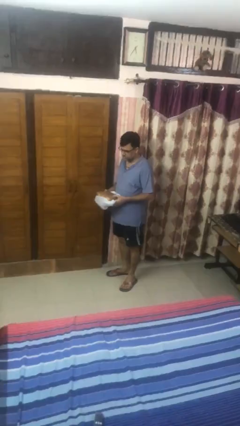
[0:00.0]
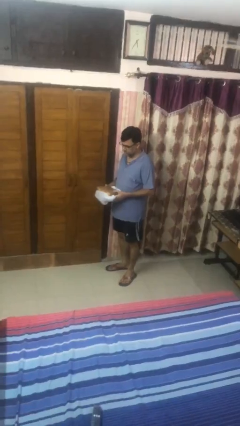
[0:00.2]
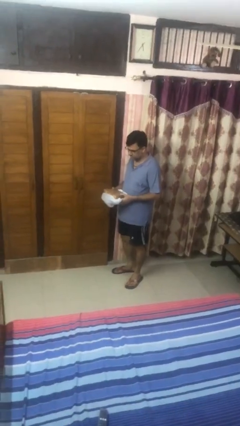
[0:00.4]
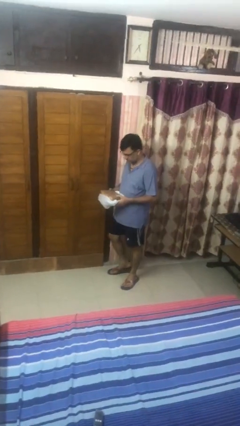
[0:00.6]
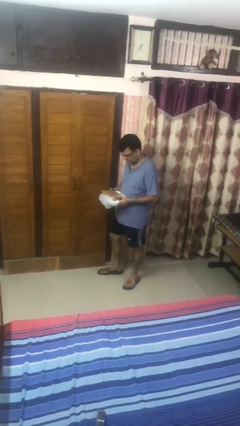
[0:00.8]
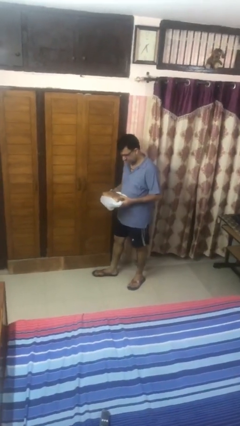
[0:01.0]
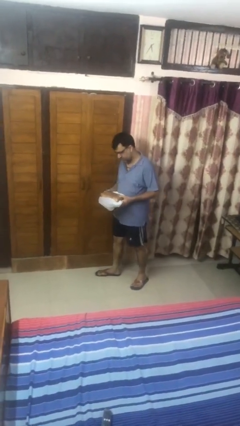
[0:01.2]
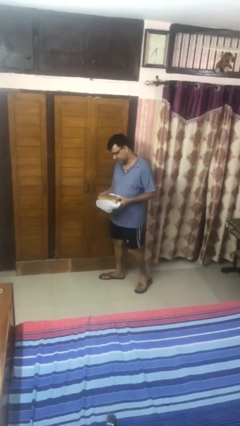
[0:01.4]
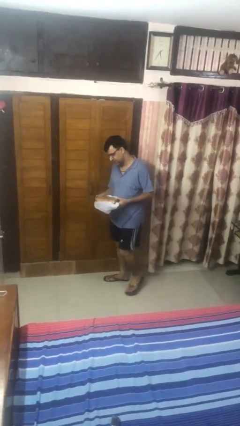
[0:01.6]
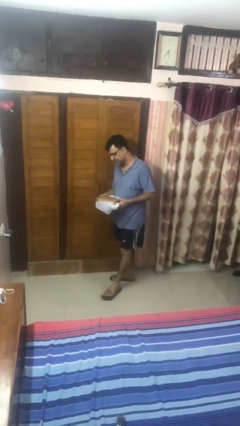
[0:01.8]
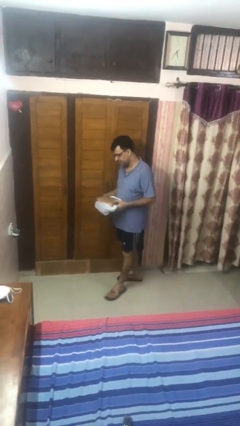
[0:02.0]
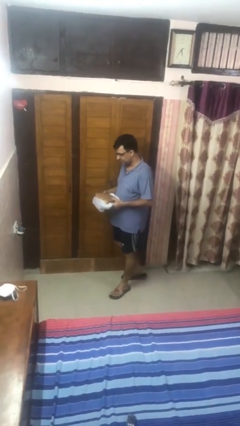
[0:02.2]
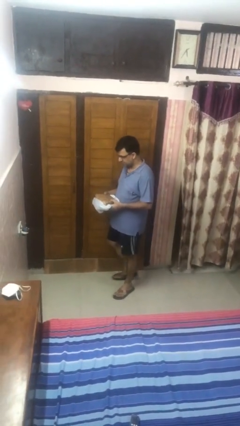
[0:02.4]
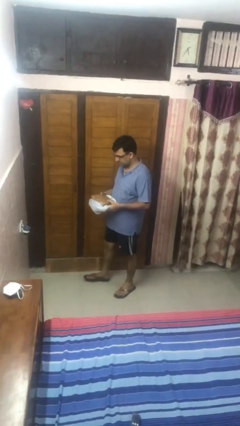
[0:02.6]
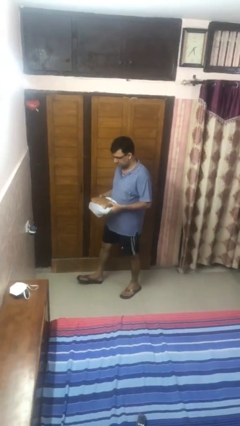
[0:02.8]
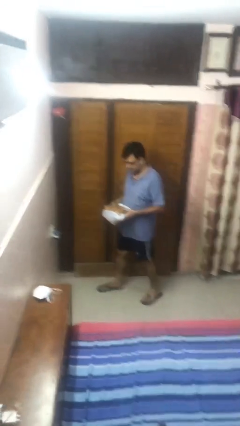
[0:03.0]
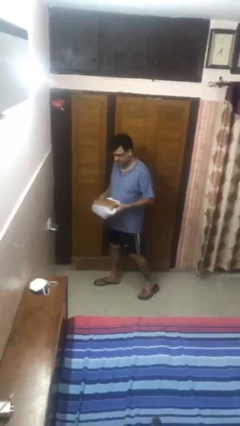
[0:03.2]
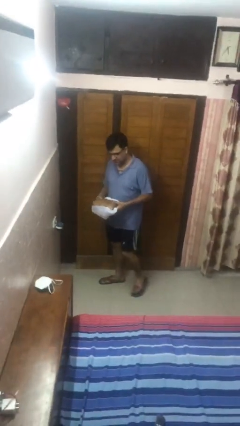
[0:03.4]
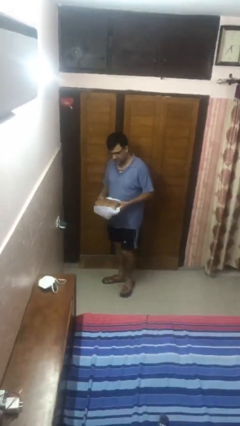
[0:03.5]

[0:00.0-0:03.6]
person carries groceries

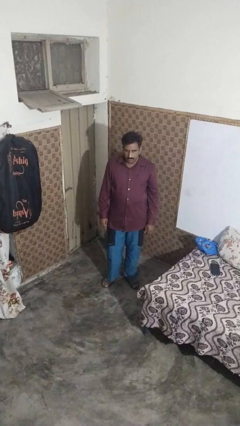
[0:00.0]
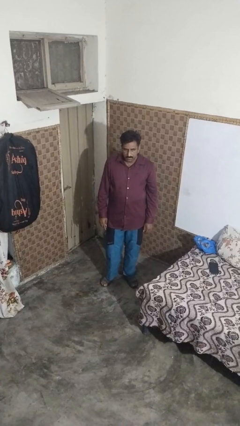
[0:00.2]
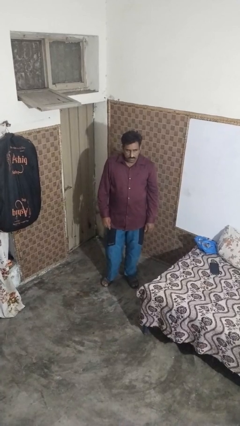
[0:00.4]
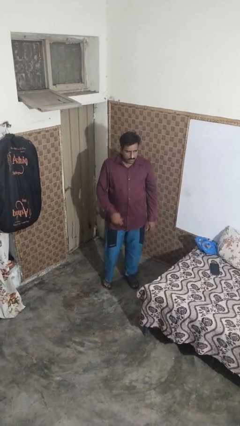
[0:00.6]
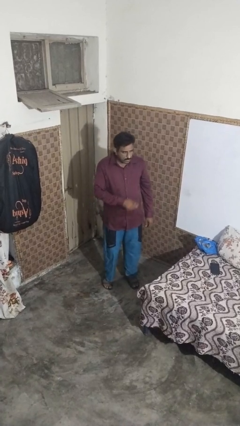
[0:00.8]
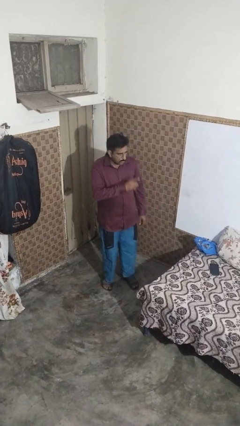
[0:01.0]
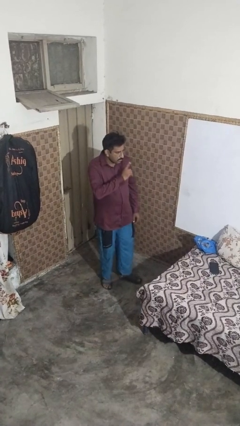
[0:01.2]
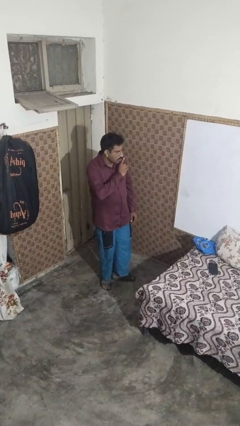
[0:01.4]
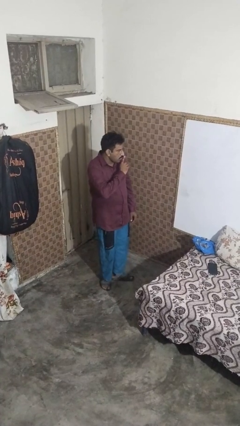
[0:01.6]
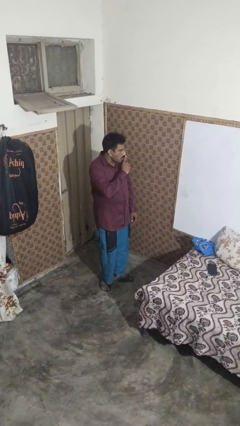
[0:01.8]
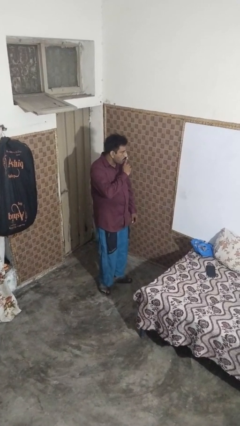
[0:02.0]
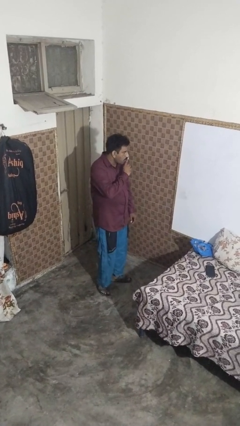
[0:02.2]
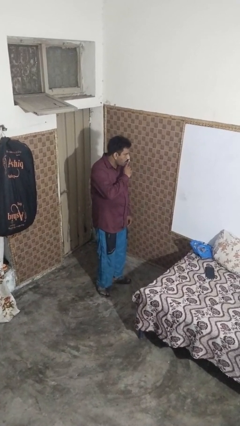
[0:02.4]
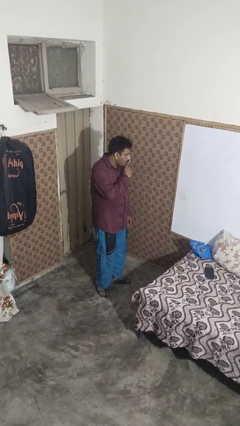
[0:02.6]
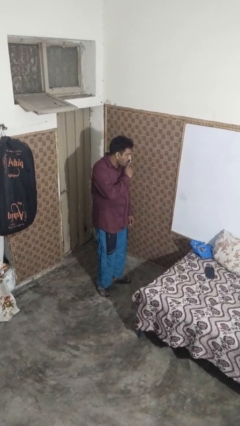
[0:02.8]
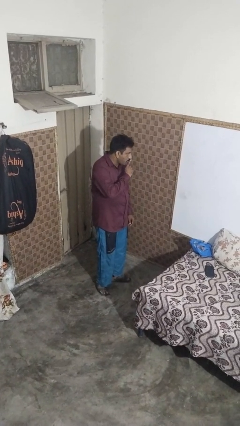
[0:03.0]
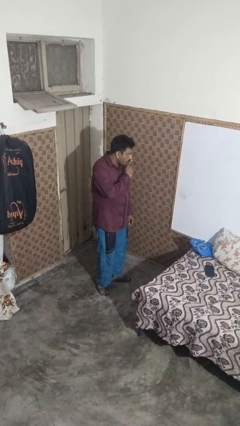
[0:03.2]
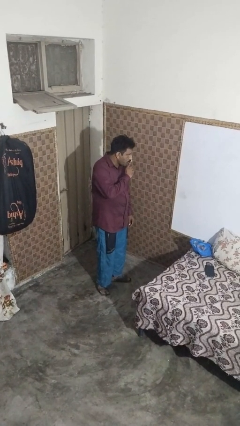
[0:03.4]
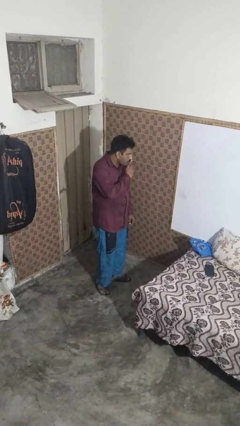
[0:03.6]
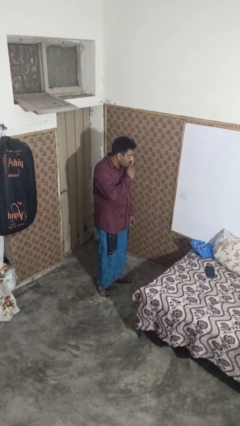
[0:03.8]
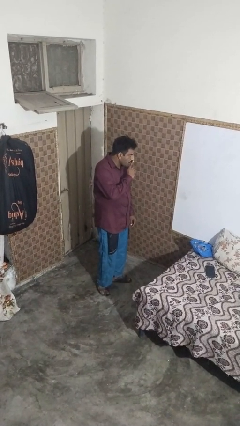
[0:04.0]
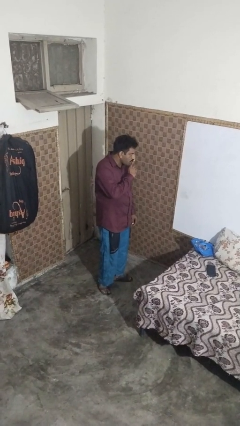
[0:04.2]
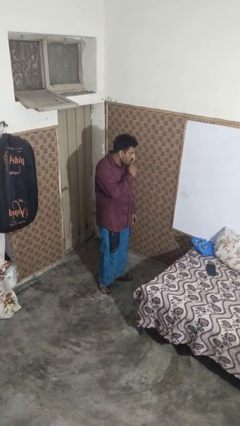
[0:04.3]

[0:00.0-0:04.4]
person gestures be quiet

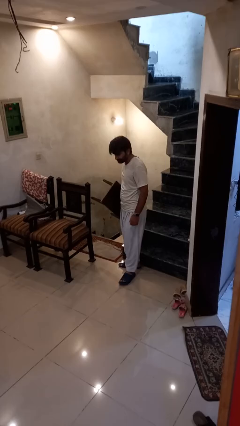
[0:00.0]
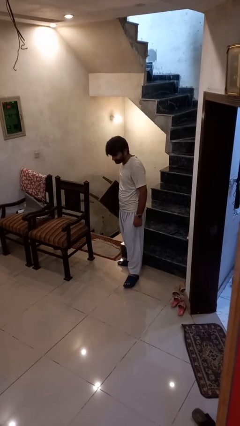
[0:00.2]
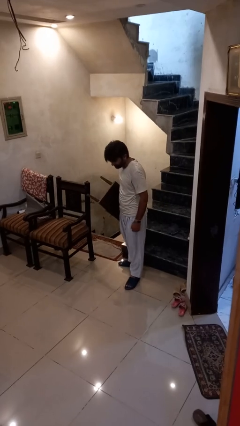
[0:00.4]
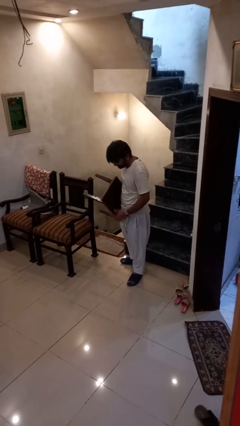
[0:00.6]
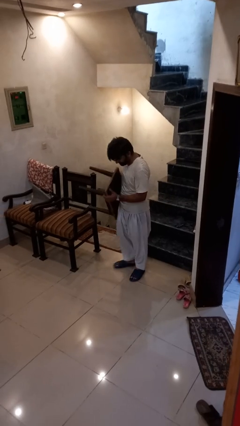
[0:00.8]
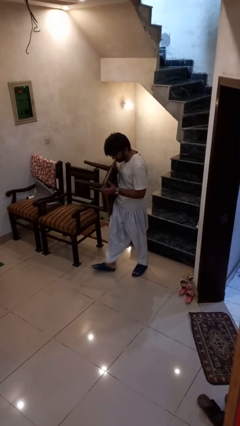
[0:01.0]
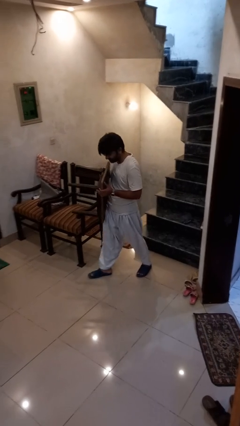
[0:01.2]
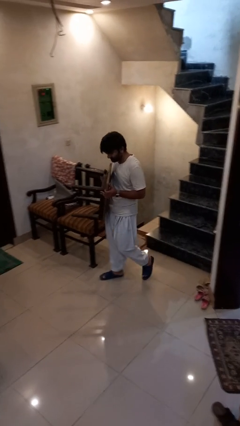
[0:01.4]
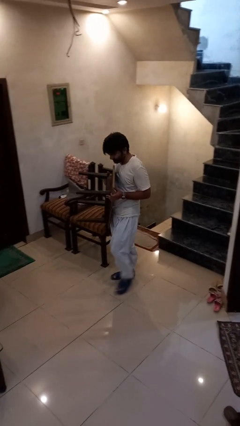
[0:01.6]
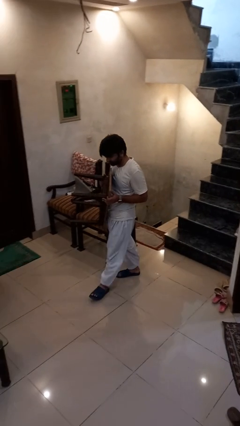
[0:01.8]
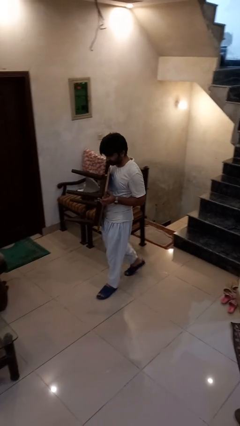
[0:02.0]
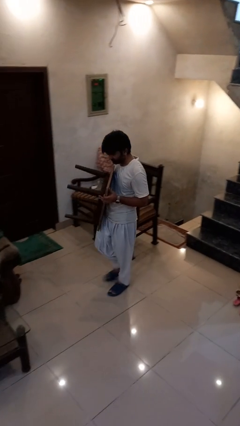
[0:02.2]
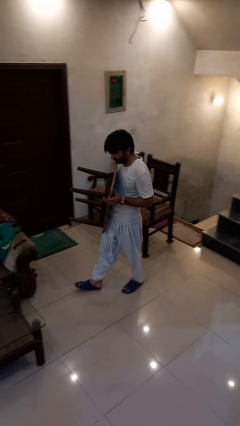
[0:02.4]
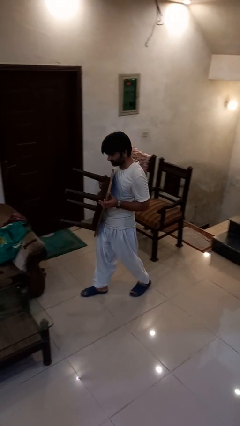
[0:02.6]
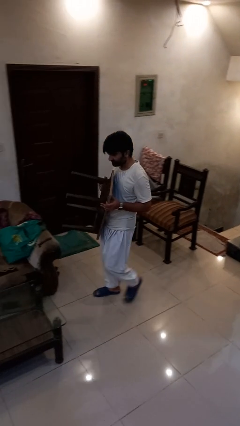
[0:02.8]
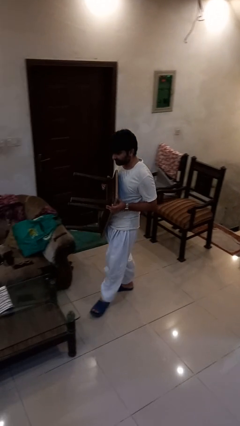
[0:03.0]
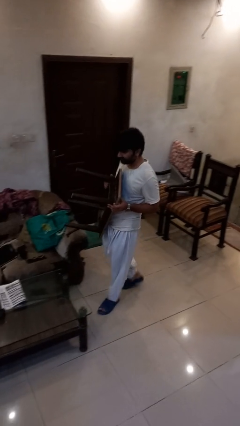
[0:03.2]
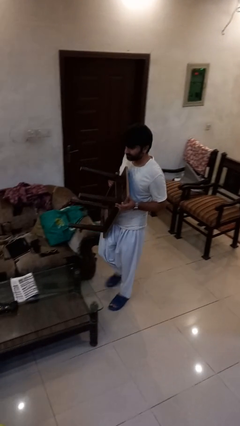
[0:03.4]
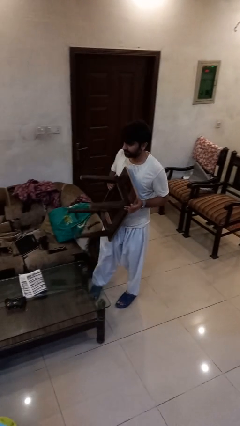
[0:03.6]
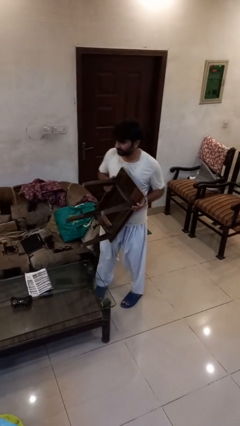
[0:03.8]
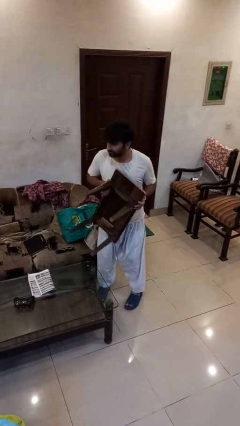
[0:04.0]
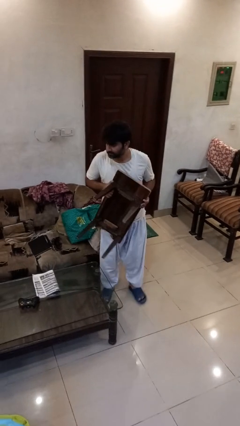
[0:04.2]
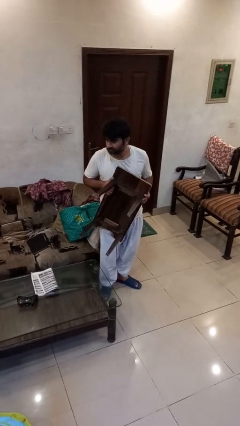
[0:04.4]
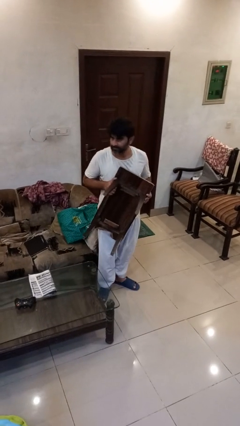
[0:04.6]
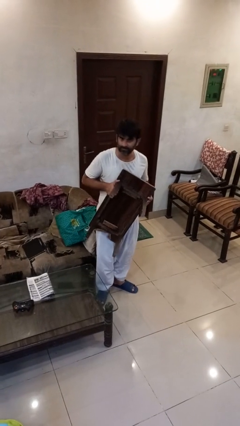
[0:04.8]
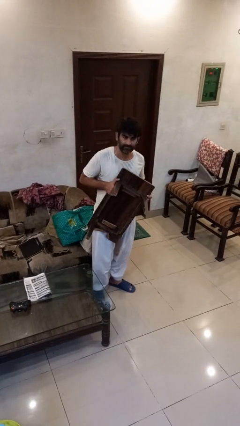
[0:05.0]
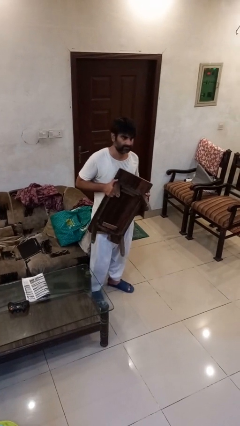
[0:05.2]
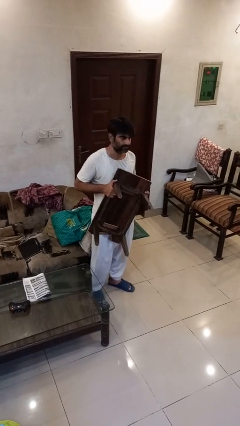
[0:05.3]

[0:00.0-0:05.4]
person carries furniture

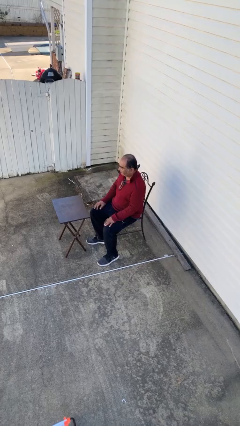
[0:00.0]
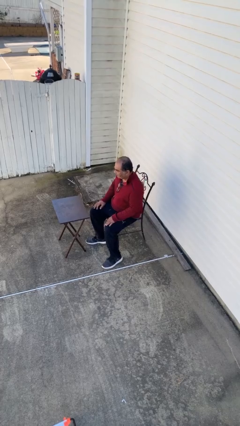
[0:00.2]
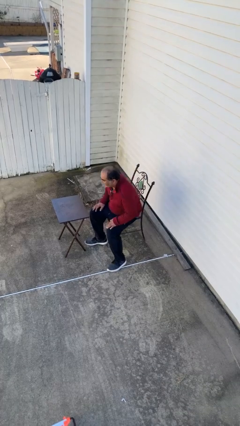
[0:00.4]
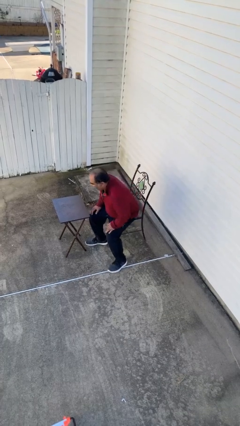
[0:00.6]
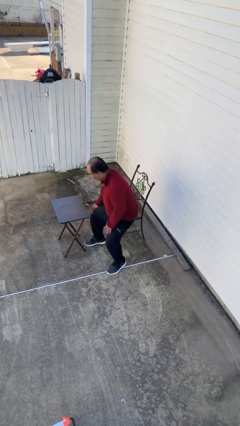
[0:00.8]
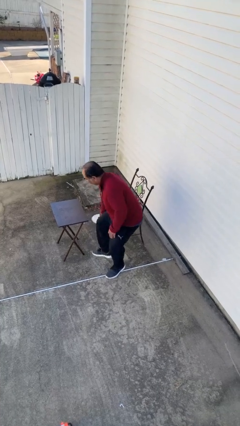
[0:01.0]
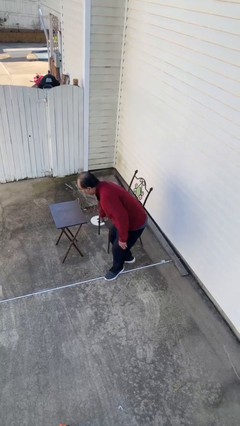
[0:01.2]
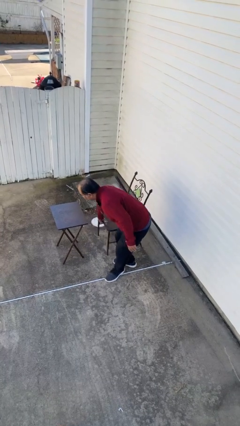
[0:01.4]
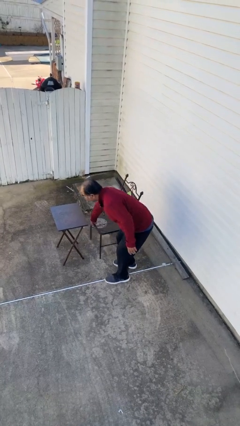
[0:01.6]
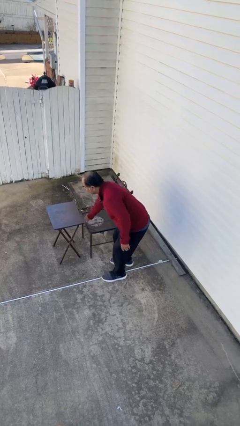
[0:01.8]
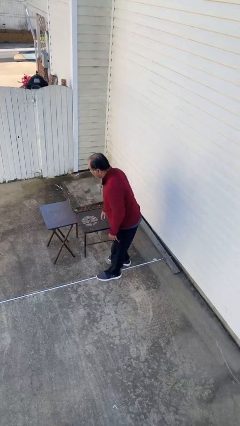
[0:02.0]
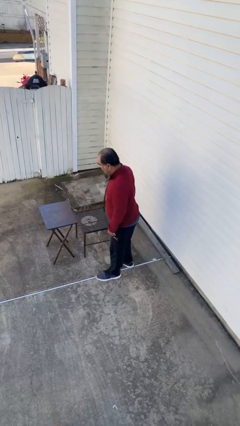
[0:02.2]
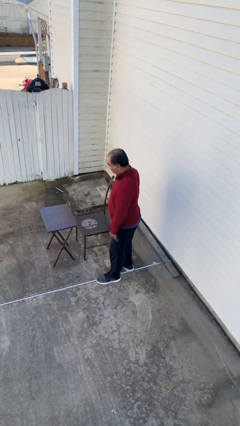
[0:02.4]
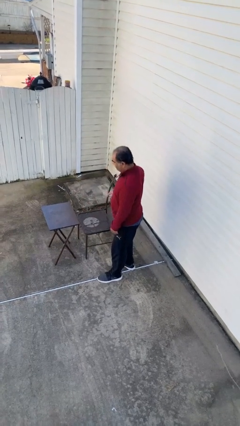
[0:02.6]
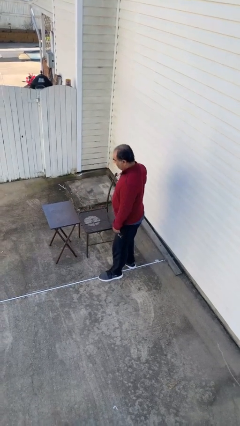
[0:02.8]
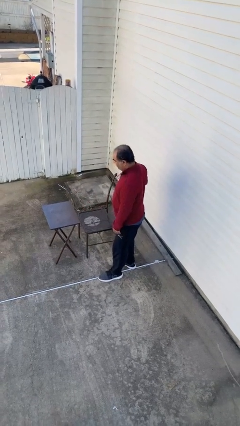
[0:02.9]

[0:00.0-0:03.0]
person stands up

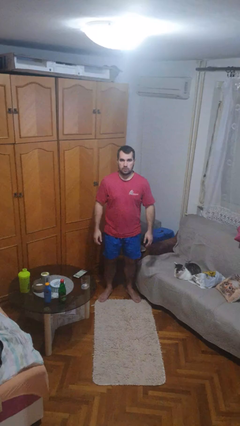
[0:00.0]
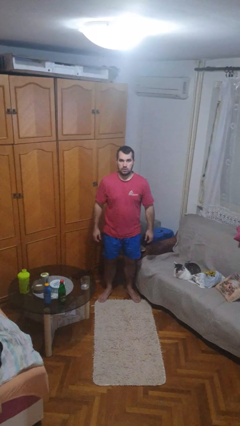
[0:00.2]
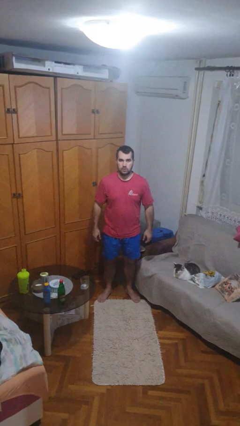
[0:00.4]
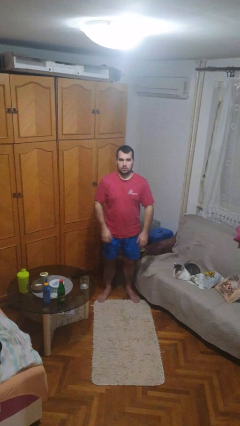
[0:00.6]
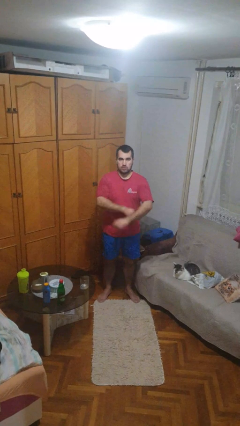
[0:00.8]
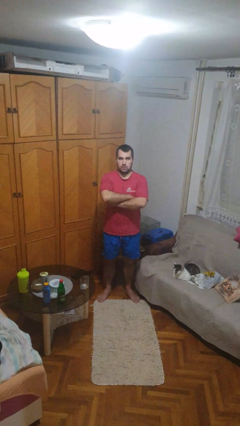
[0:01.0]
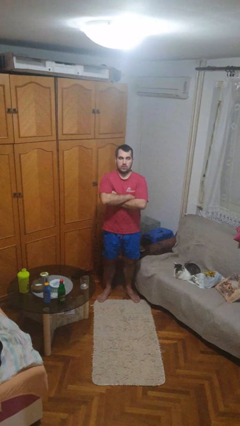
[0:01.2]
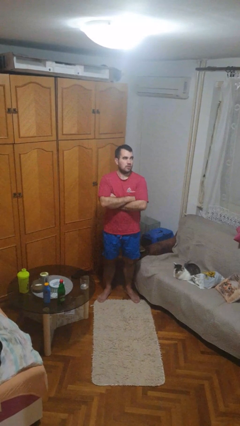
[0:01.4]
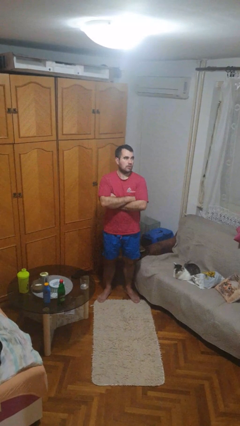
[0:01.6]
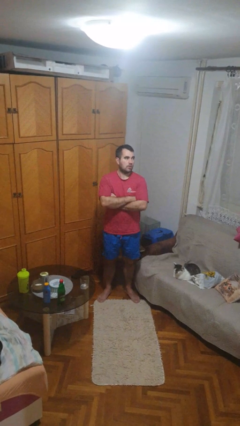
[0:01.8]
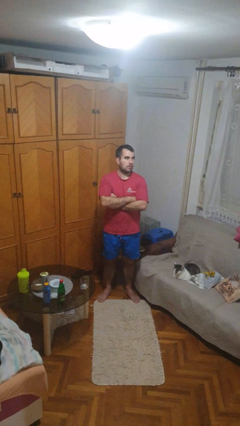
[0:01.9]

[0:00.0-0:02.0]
person crosses arms
